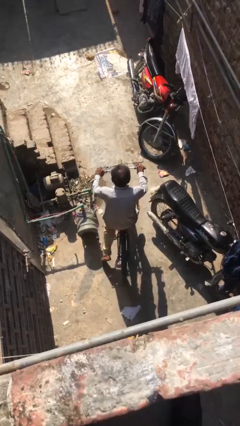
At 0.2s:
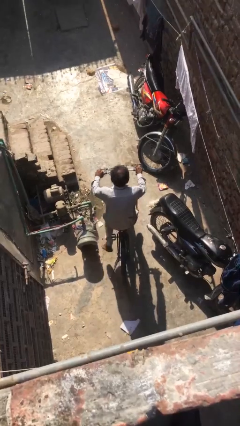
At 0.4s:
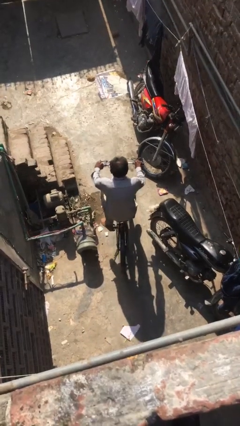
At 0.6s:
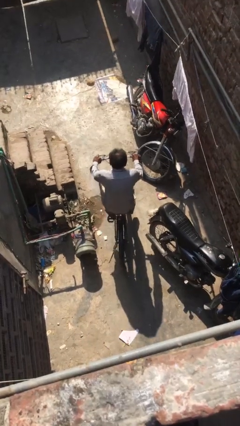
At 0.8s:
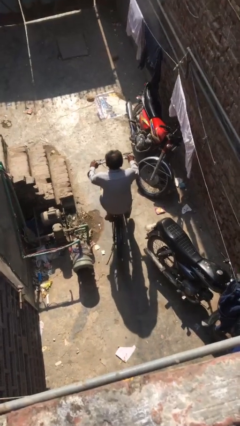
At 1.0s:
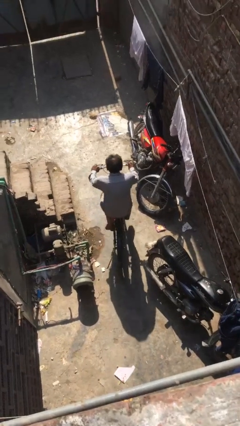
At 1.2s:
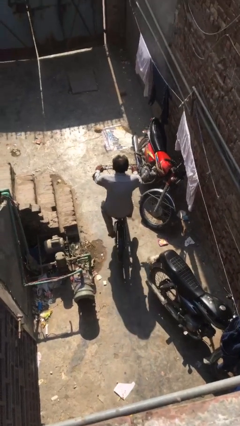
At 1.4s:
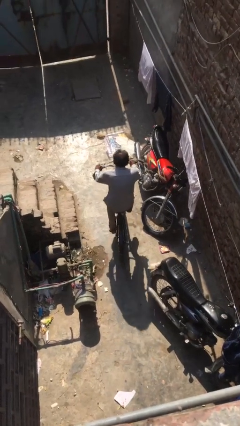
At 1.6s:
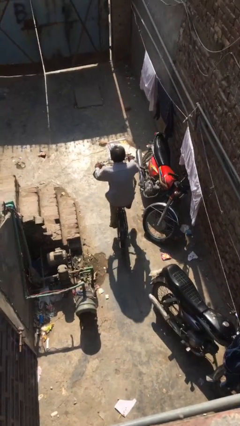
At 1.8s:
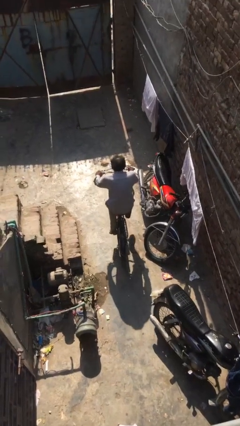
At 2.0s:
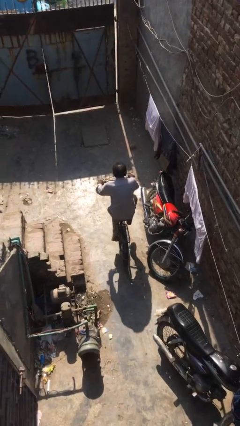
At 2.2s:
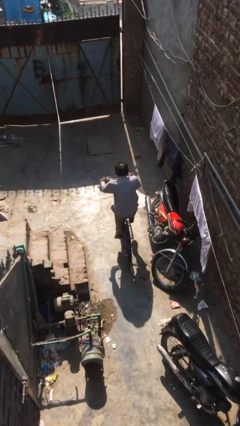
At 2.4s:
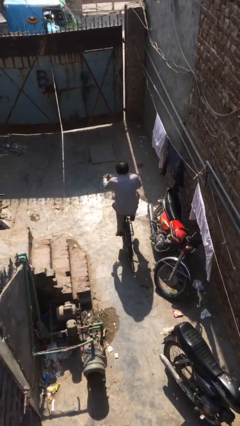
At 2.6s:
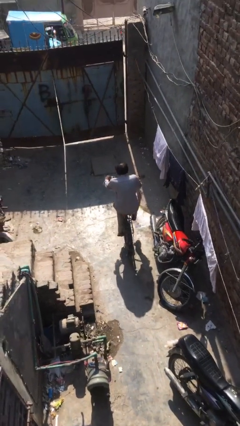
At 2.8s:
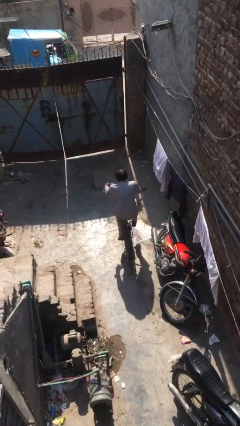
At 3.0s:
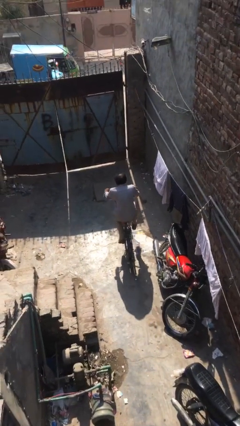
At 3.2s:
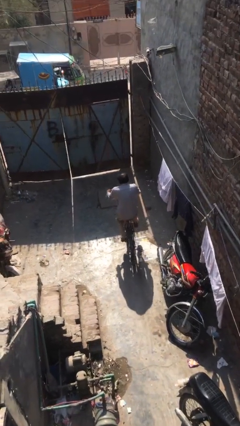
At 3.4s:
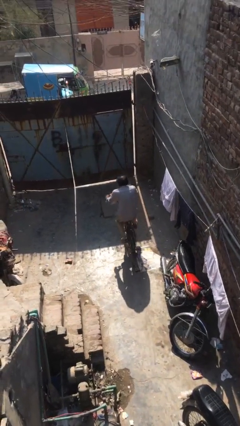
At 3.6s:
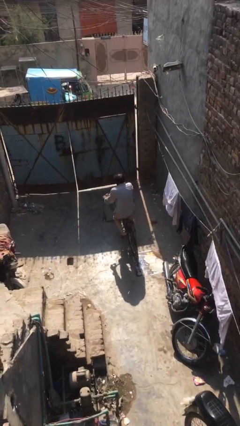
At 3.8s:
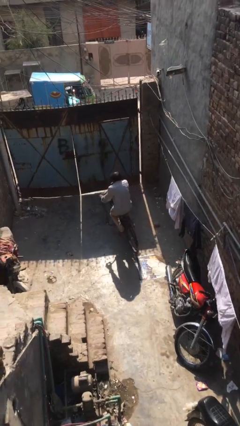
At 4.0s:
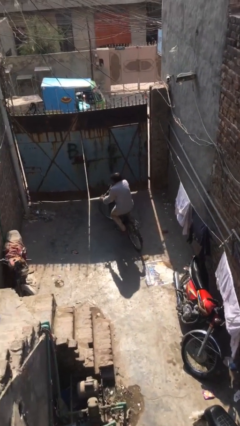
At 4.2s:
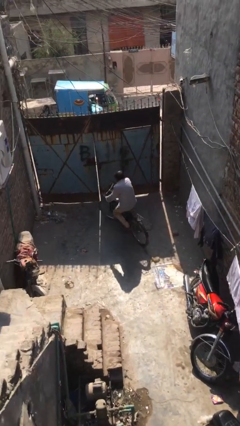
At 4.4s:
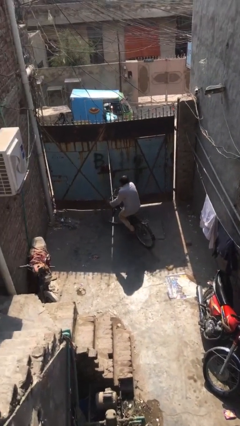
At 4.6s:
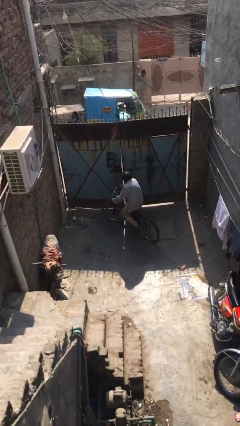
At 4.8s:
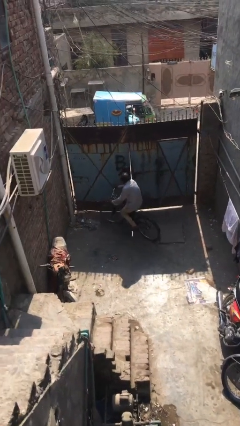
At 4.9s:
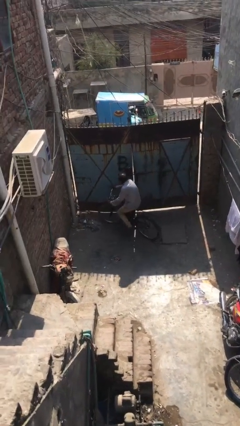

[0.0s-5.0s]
person rides bicycle

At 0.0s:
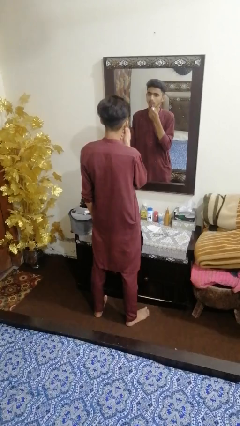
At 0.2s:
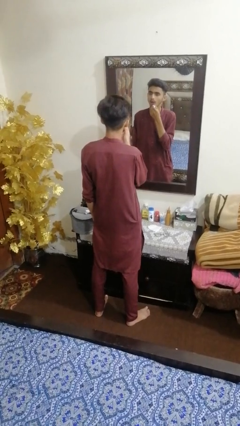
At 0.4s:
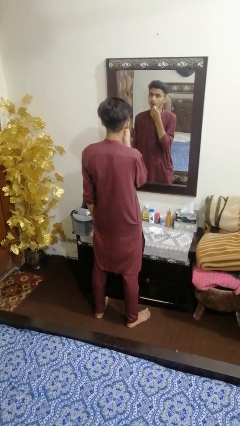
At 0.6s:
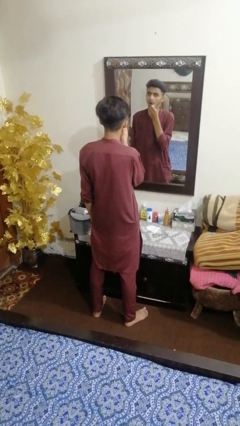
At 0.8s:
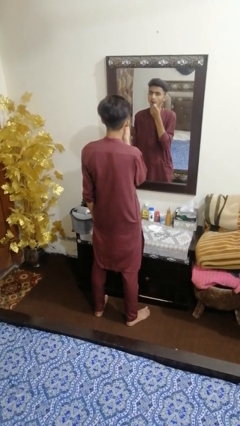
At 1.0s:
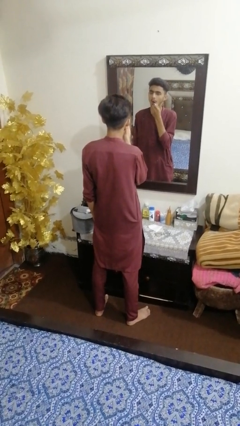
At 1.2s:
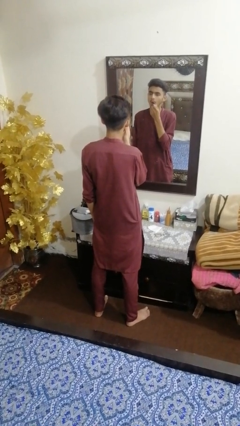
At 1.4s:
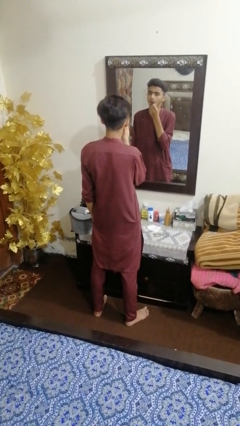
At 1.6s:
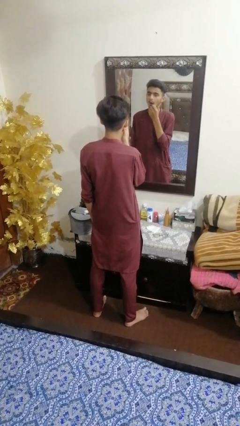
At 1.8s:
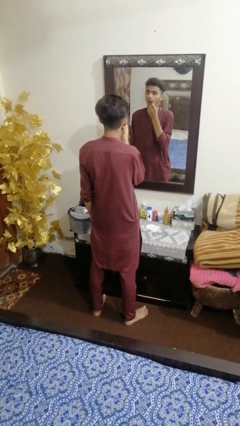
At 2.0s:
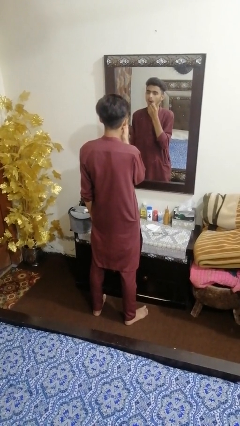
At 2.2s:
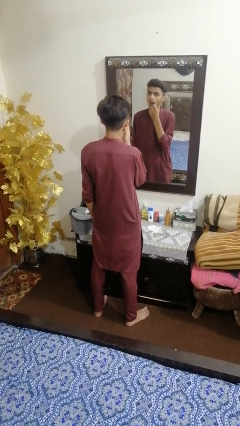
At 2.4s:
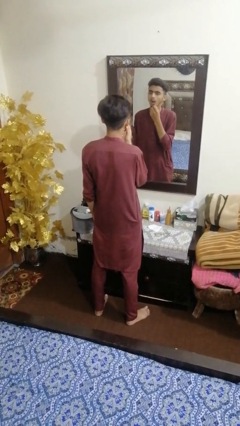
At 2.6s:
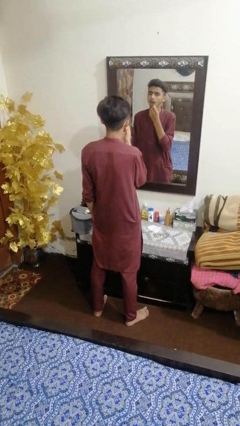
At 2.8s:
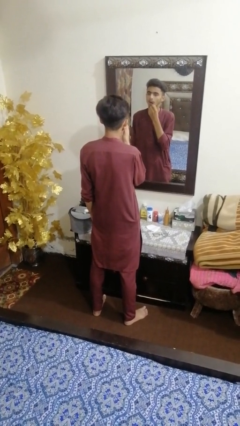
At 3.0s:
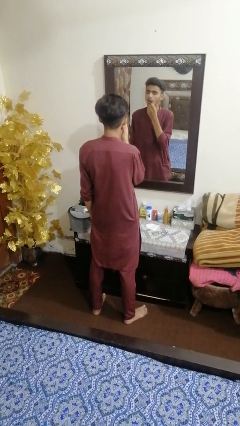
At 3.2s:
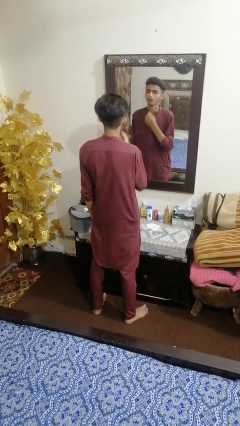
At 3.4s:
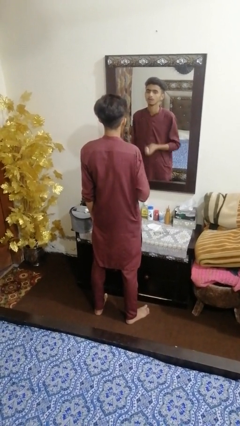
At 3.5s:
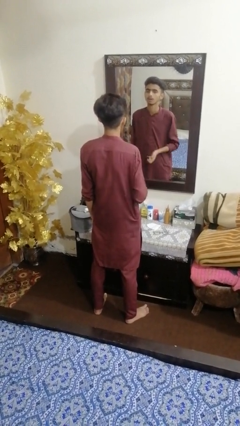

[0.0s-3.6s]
person applies lip makeup

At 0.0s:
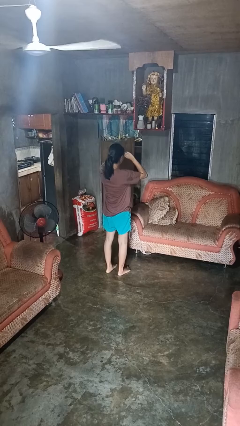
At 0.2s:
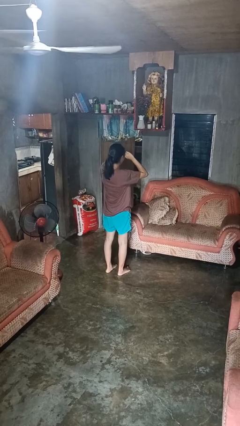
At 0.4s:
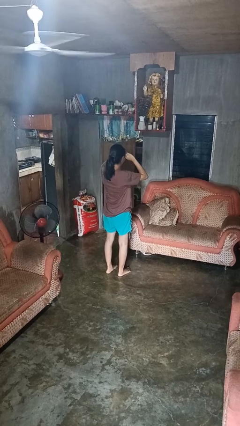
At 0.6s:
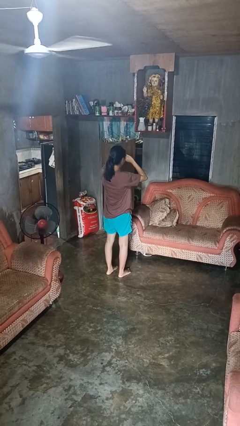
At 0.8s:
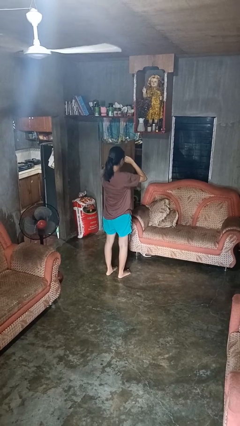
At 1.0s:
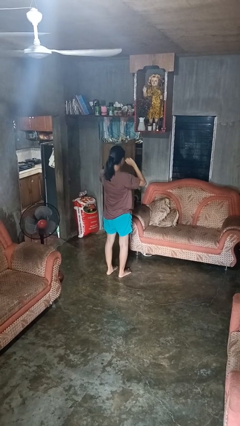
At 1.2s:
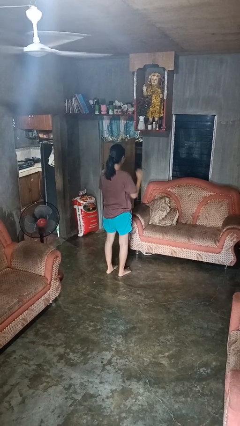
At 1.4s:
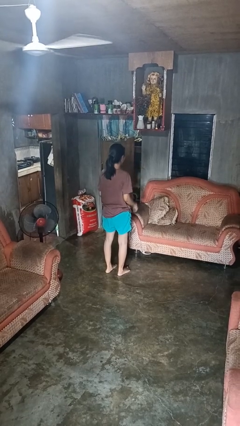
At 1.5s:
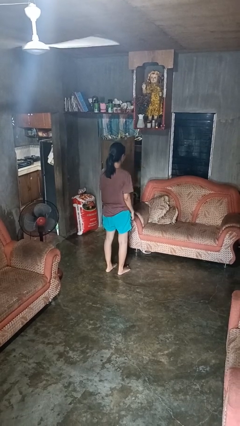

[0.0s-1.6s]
person rubs eyes

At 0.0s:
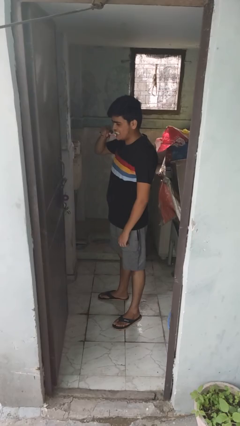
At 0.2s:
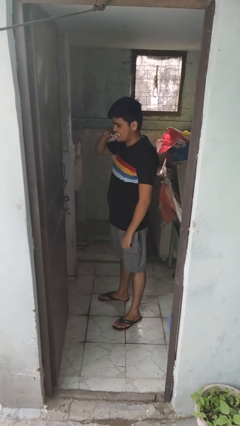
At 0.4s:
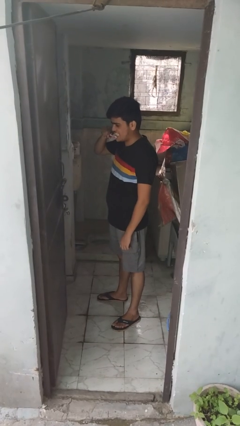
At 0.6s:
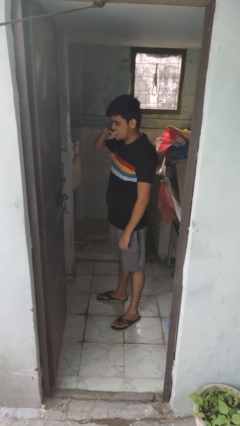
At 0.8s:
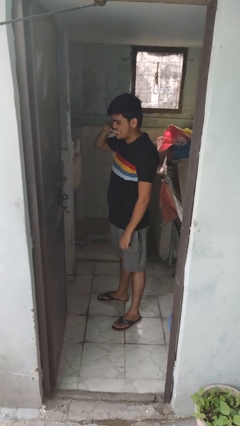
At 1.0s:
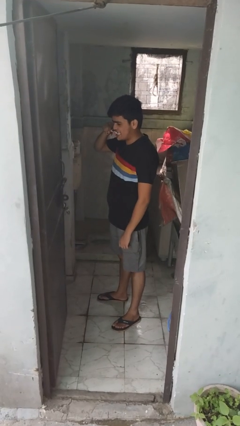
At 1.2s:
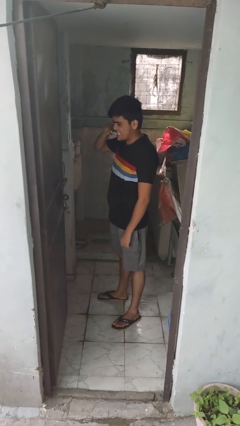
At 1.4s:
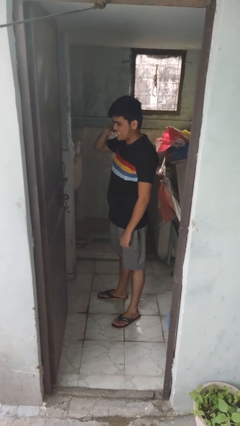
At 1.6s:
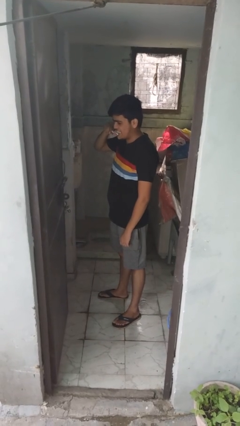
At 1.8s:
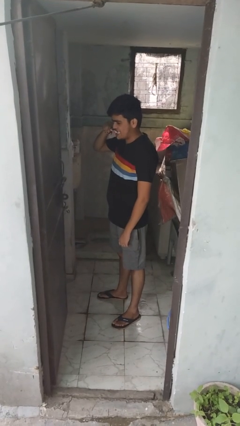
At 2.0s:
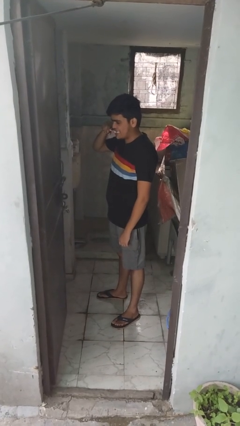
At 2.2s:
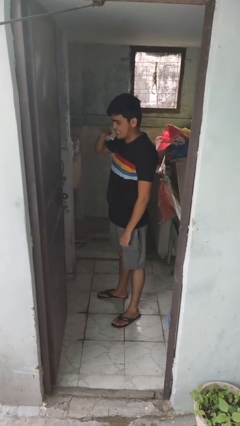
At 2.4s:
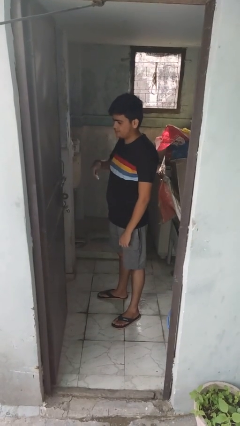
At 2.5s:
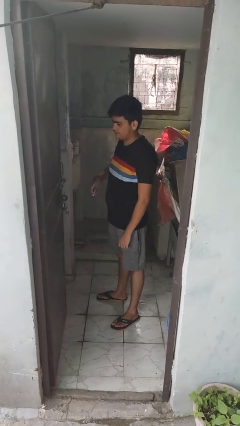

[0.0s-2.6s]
person brushes teeth

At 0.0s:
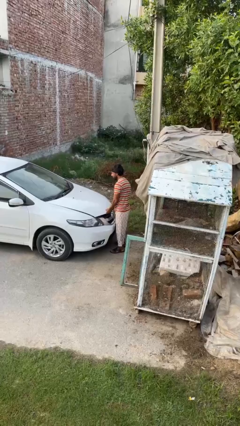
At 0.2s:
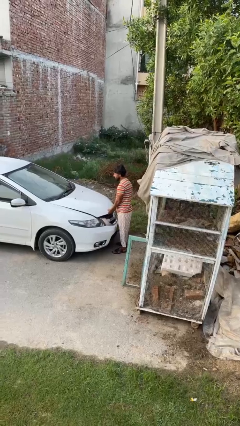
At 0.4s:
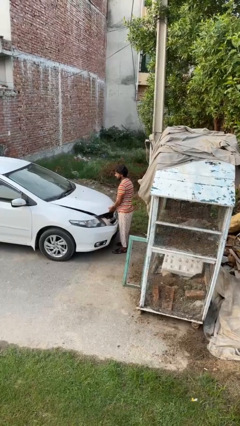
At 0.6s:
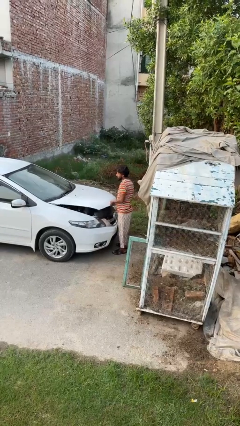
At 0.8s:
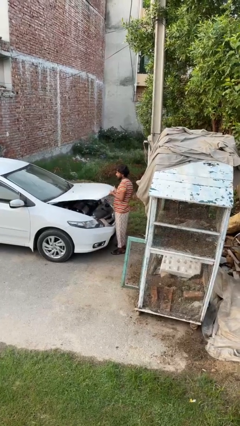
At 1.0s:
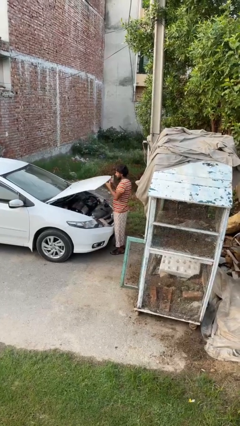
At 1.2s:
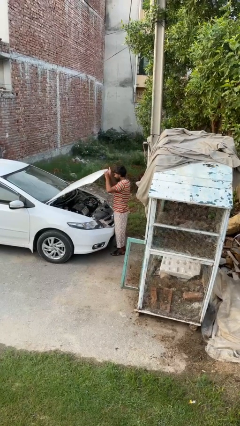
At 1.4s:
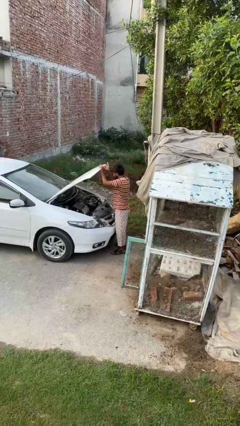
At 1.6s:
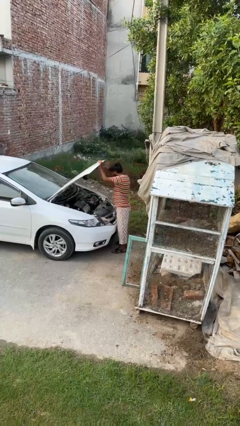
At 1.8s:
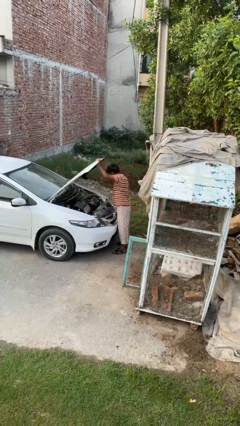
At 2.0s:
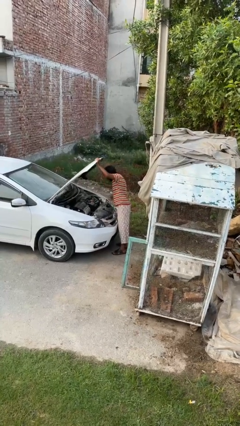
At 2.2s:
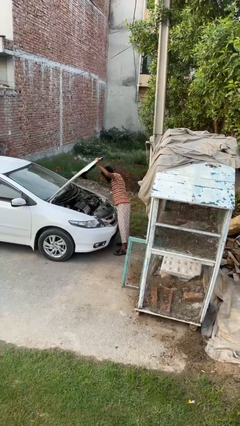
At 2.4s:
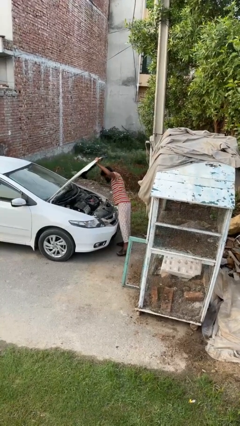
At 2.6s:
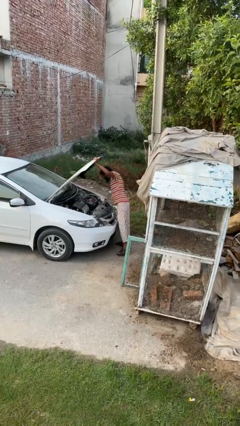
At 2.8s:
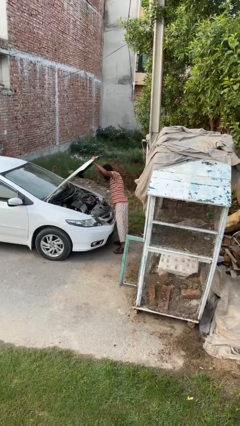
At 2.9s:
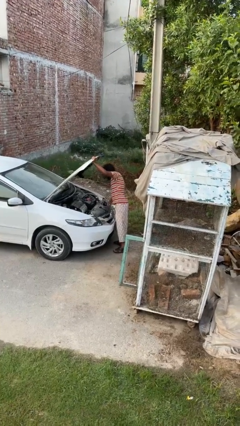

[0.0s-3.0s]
person opens car hood

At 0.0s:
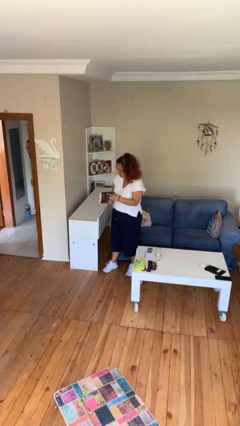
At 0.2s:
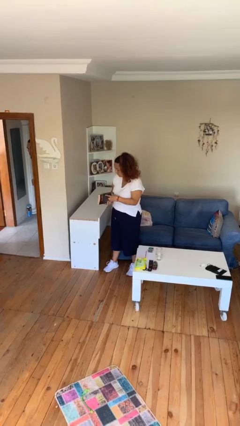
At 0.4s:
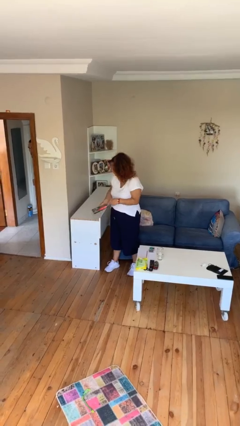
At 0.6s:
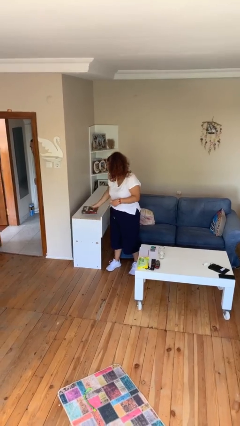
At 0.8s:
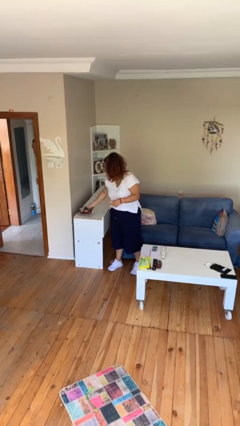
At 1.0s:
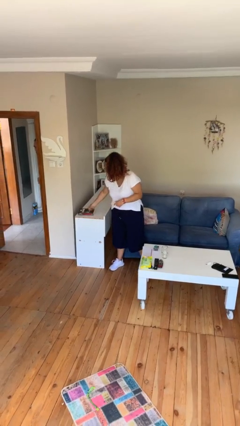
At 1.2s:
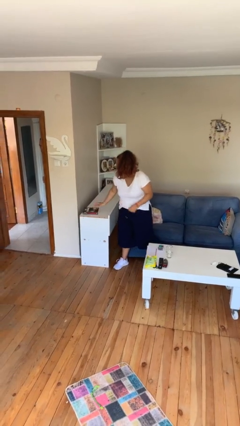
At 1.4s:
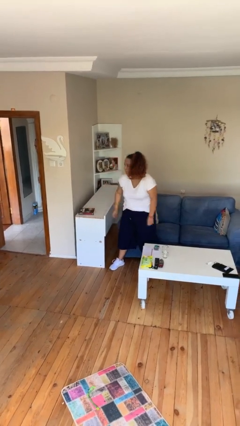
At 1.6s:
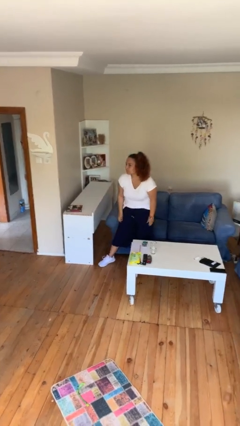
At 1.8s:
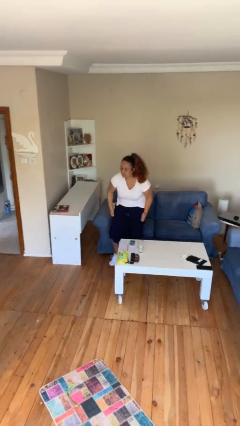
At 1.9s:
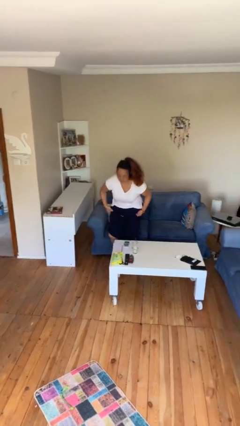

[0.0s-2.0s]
person puts down object on table
